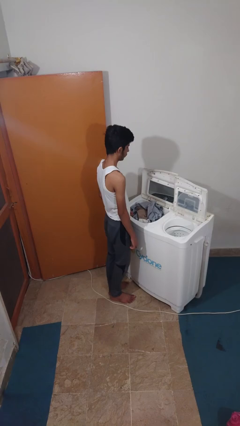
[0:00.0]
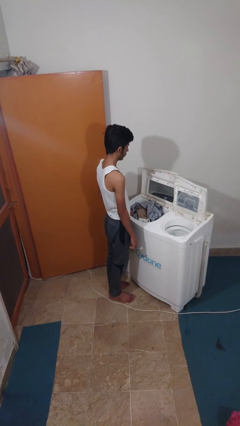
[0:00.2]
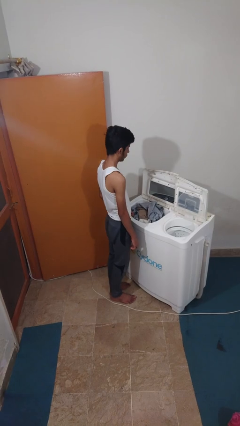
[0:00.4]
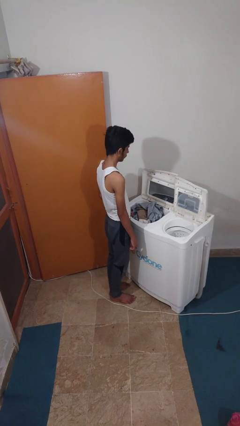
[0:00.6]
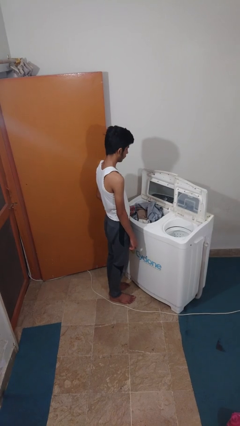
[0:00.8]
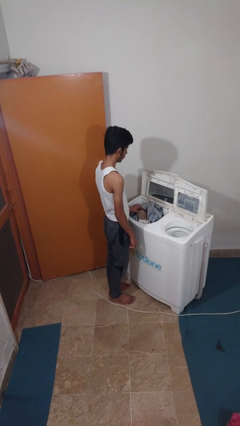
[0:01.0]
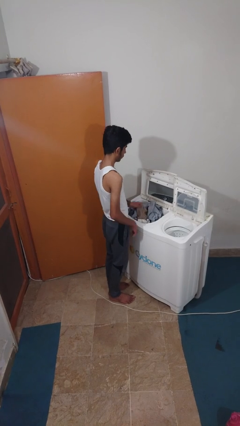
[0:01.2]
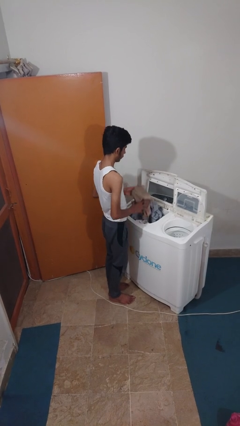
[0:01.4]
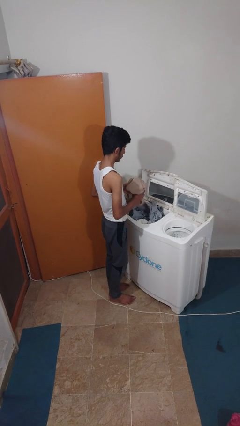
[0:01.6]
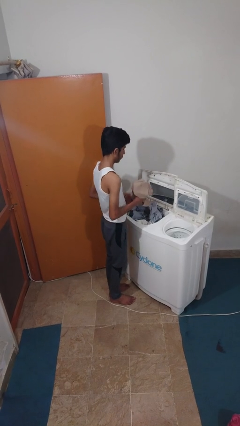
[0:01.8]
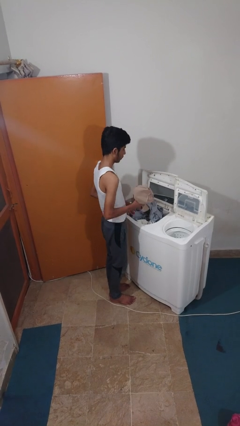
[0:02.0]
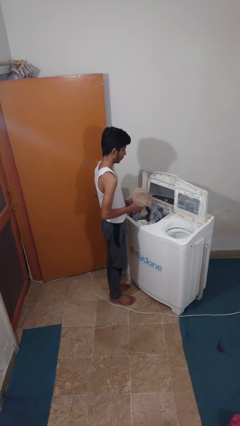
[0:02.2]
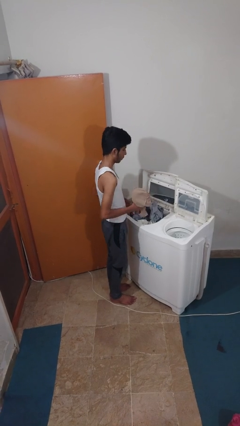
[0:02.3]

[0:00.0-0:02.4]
person unloads clotheswasher

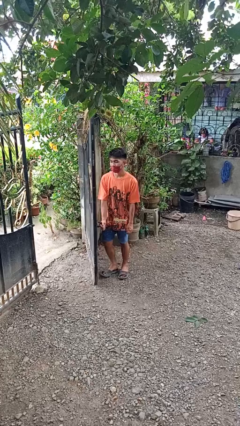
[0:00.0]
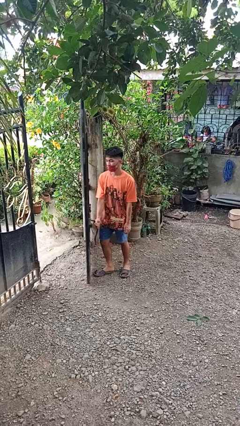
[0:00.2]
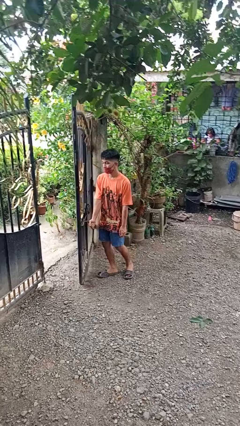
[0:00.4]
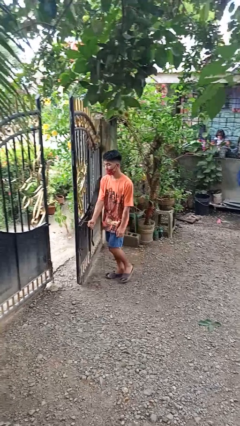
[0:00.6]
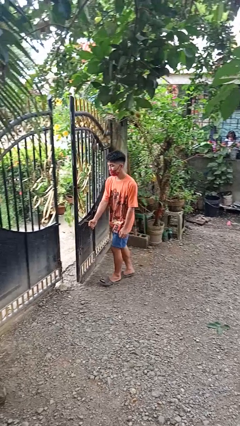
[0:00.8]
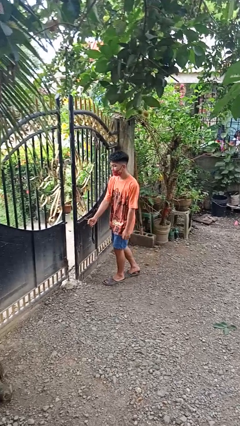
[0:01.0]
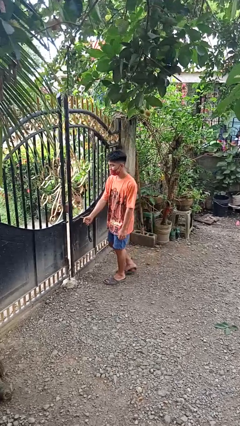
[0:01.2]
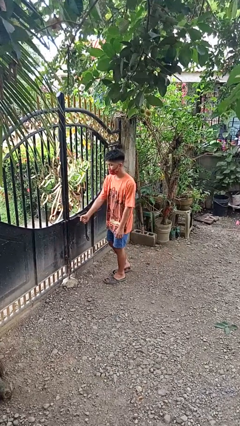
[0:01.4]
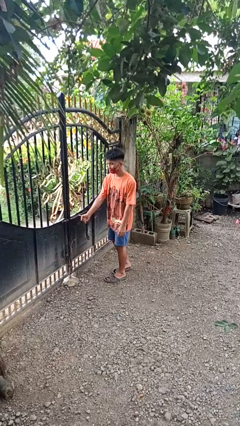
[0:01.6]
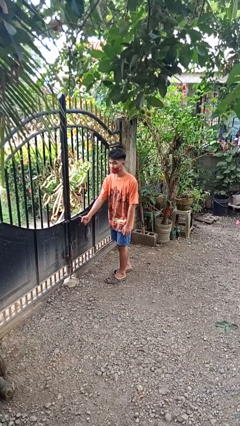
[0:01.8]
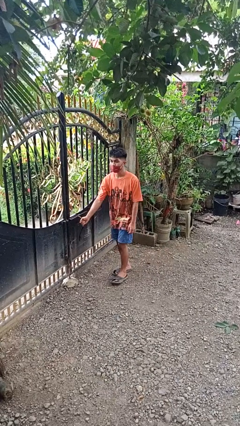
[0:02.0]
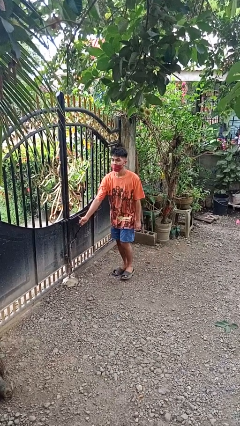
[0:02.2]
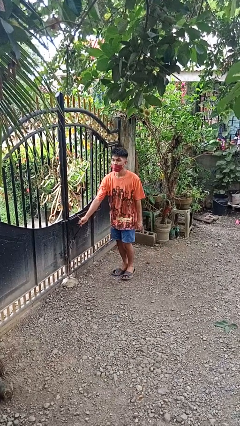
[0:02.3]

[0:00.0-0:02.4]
person closes gate

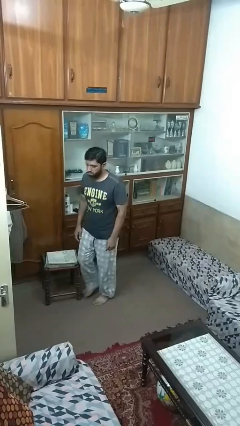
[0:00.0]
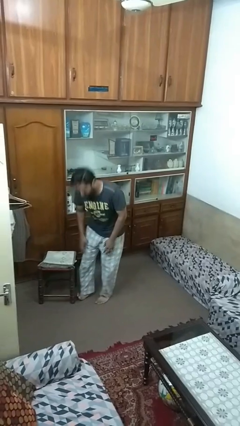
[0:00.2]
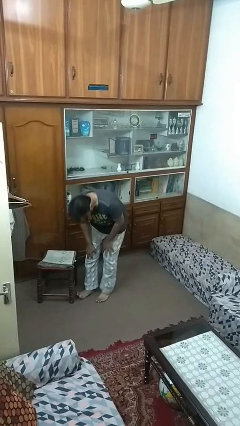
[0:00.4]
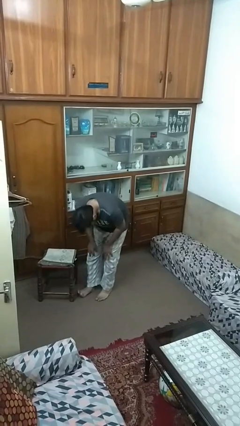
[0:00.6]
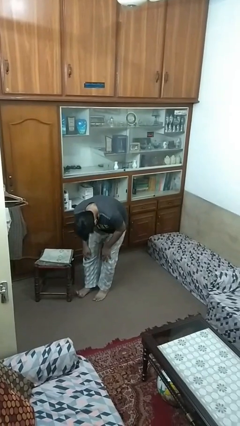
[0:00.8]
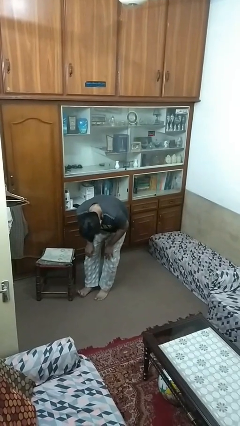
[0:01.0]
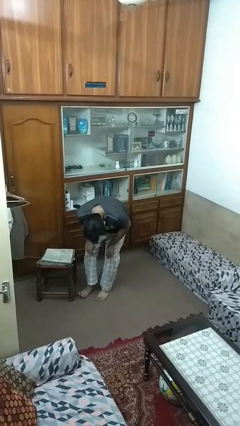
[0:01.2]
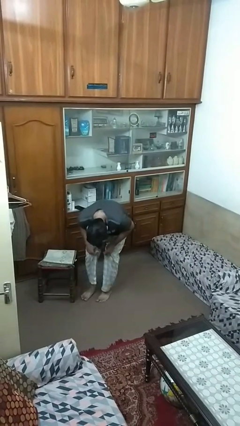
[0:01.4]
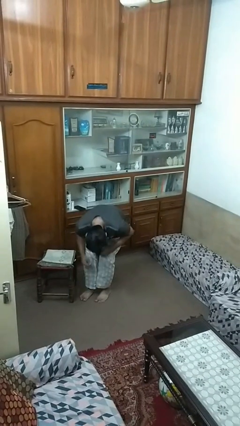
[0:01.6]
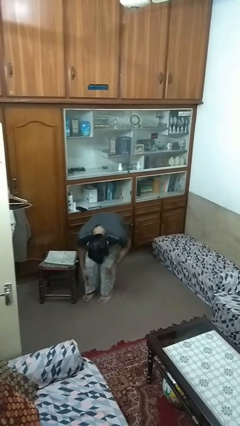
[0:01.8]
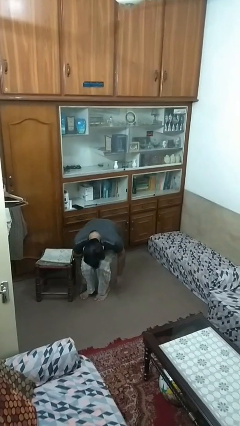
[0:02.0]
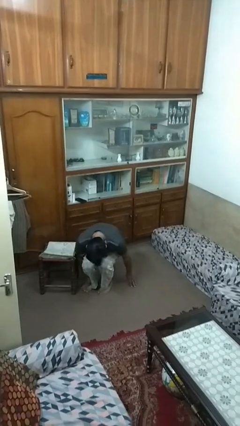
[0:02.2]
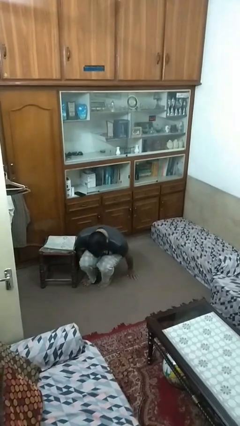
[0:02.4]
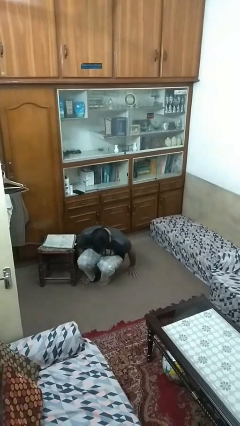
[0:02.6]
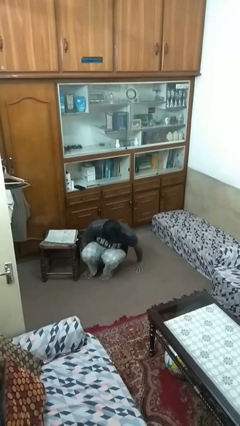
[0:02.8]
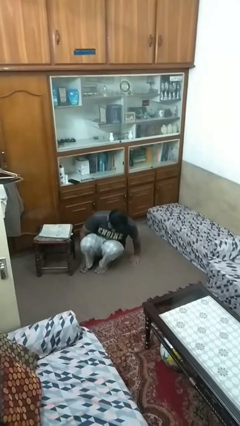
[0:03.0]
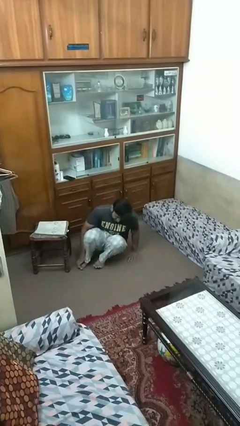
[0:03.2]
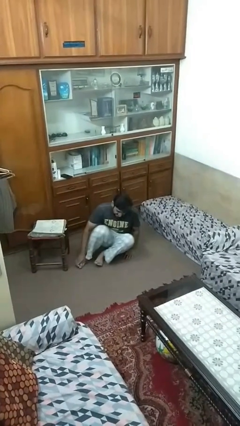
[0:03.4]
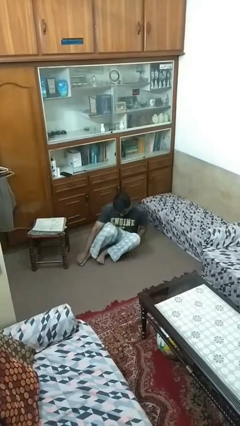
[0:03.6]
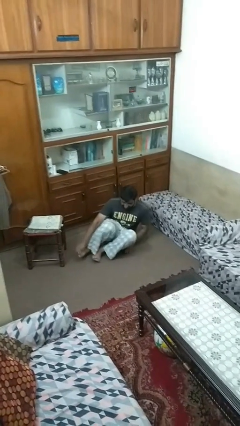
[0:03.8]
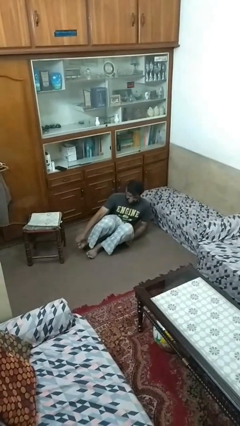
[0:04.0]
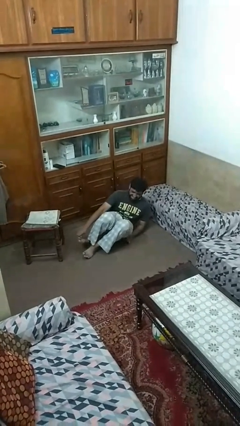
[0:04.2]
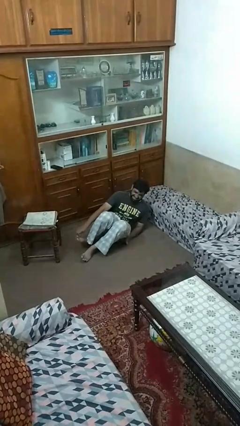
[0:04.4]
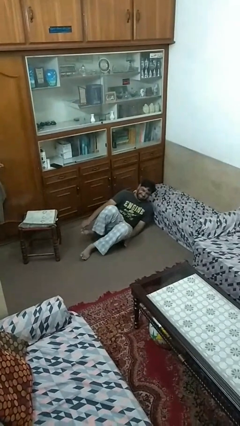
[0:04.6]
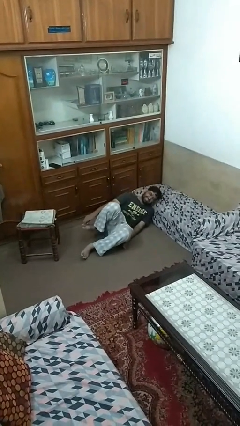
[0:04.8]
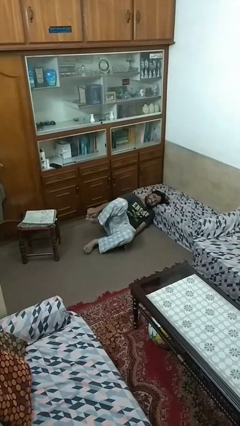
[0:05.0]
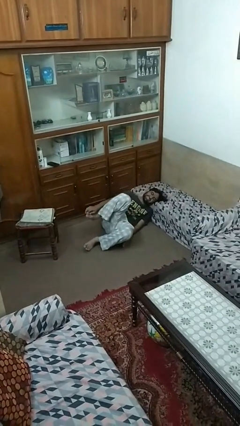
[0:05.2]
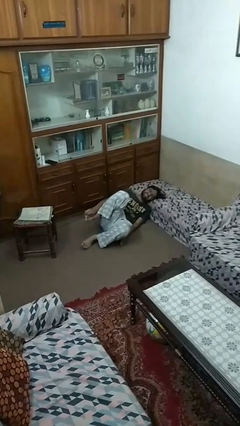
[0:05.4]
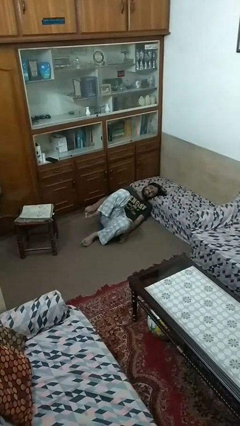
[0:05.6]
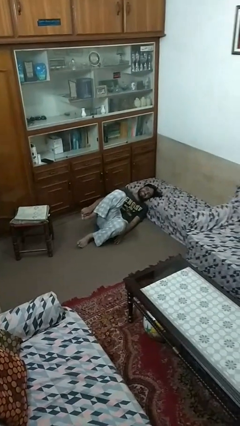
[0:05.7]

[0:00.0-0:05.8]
person trips on object on floor

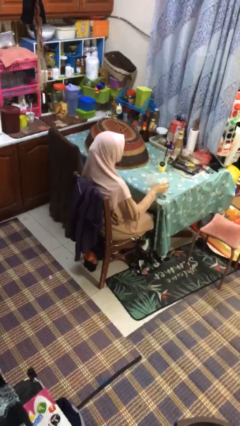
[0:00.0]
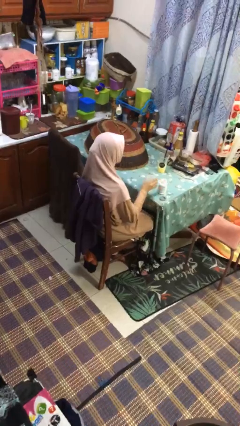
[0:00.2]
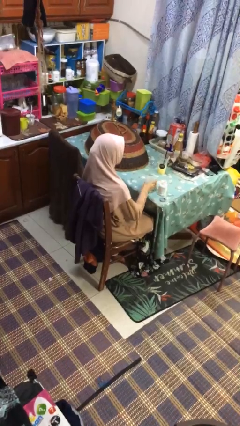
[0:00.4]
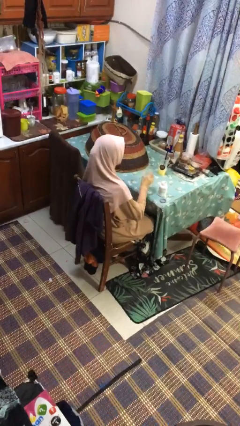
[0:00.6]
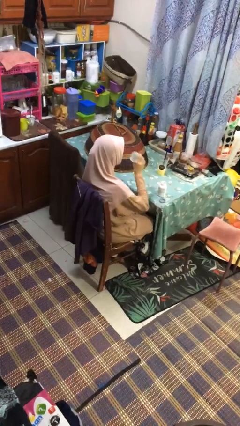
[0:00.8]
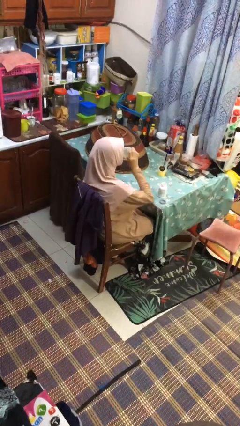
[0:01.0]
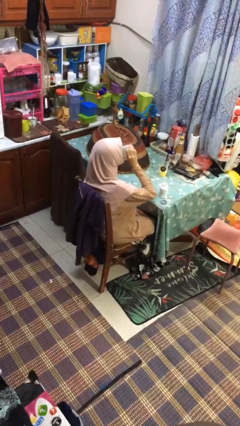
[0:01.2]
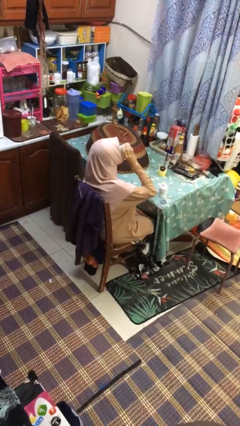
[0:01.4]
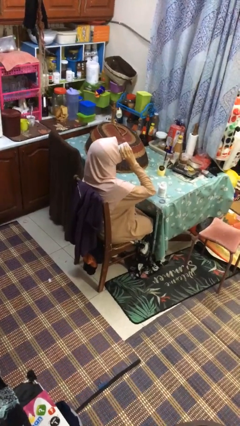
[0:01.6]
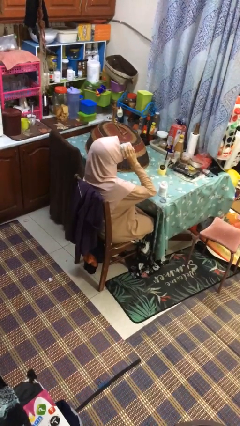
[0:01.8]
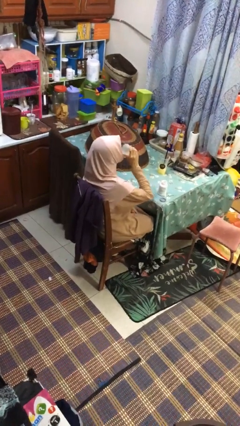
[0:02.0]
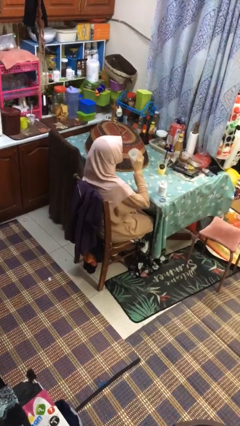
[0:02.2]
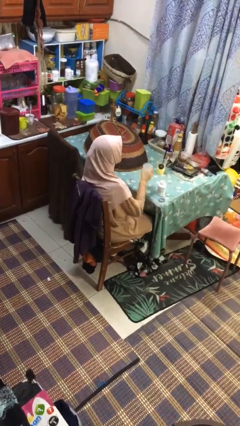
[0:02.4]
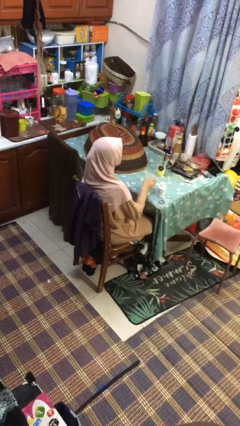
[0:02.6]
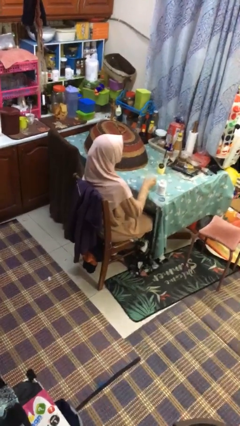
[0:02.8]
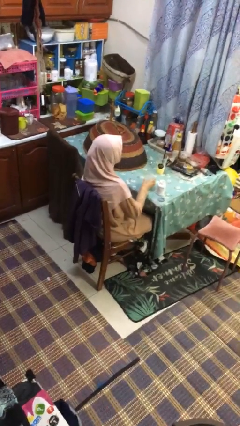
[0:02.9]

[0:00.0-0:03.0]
person drinks from cup

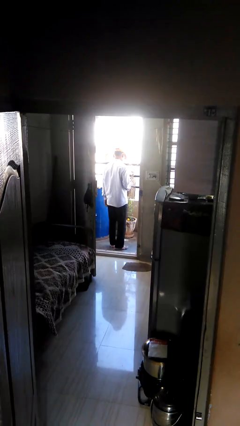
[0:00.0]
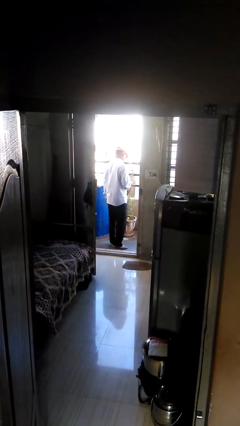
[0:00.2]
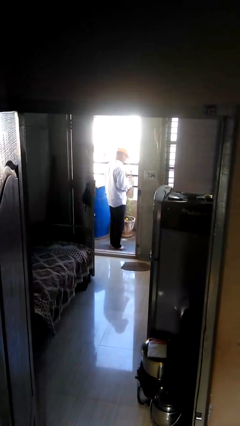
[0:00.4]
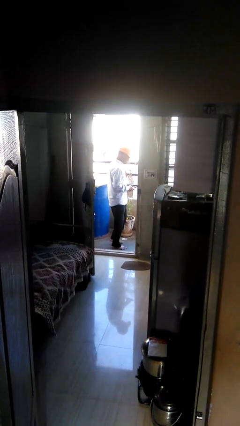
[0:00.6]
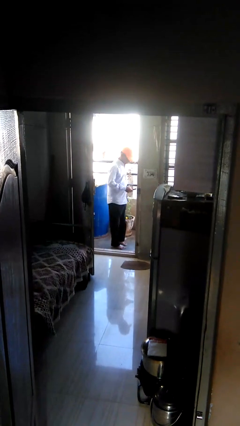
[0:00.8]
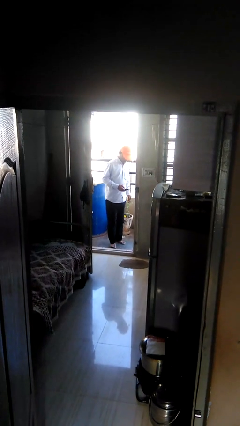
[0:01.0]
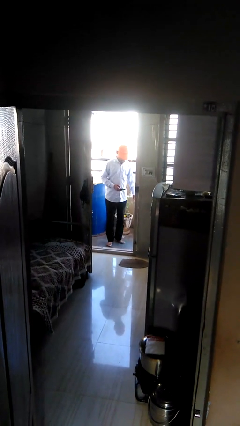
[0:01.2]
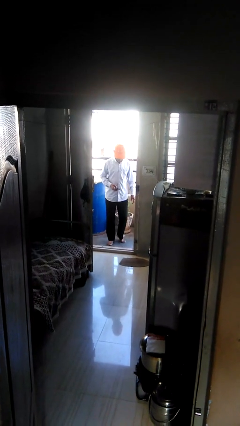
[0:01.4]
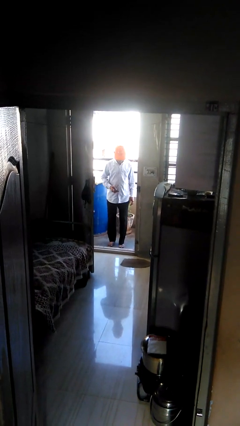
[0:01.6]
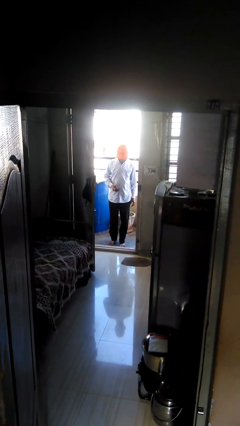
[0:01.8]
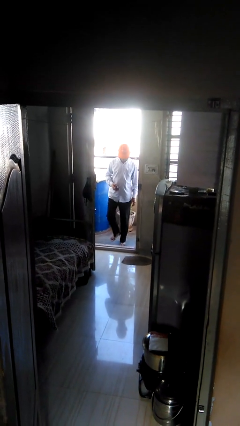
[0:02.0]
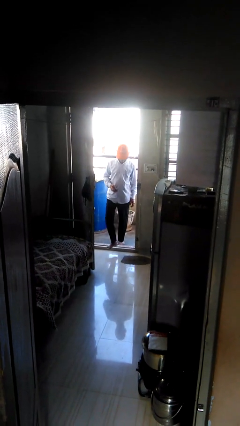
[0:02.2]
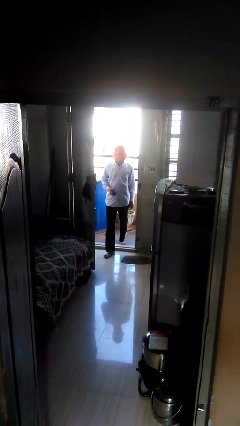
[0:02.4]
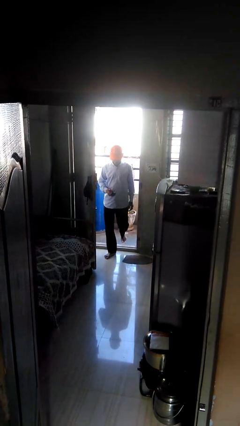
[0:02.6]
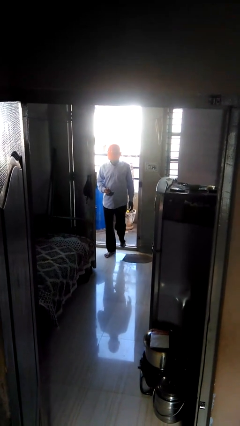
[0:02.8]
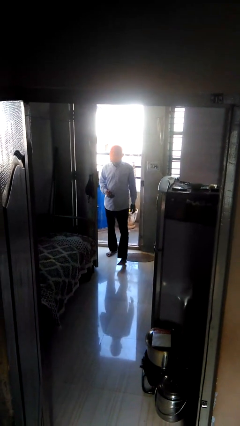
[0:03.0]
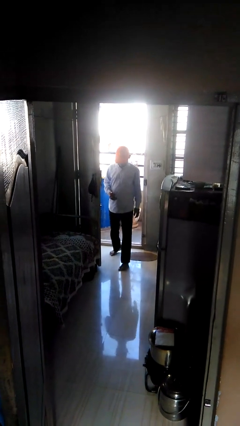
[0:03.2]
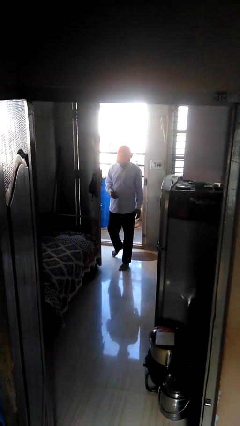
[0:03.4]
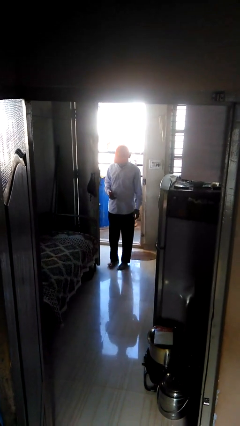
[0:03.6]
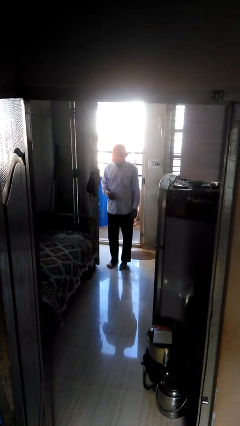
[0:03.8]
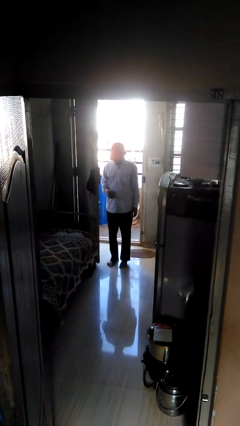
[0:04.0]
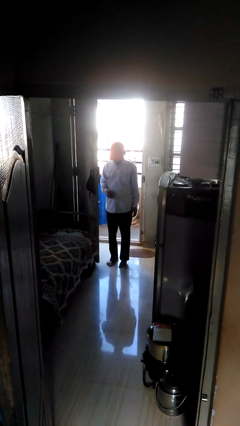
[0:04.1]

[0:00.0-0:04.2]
person enters scene through structure
